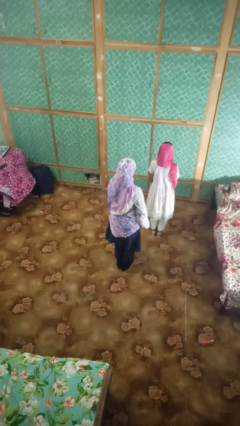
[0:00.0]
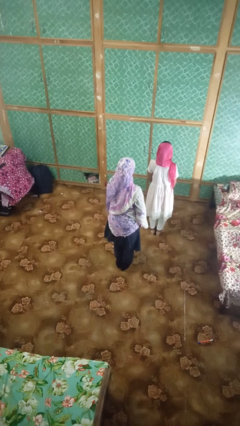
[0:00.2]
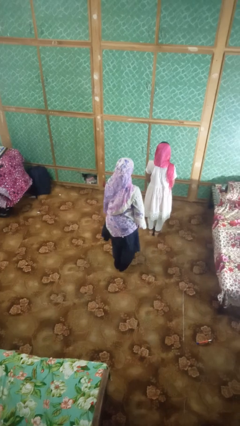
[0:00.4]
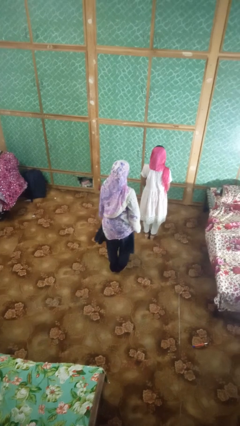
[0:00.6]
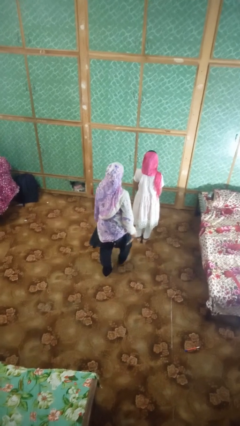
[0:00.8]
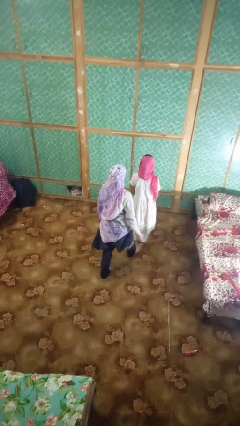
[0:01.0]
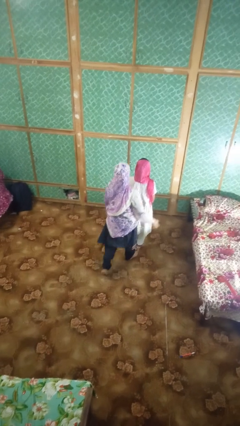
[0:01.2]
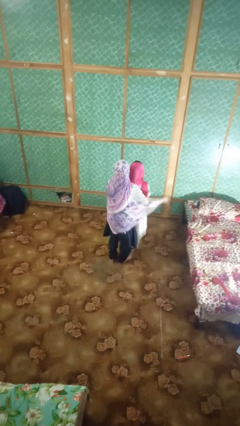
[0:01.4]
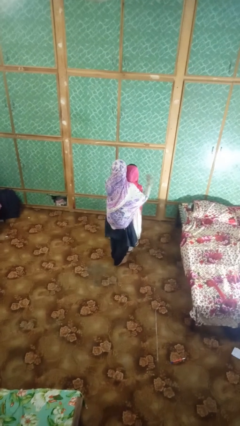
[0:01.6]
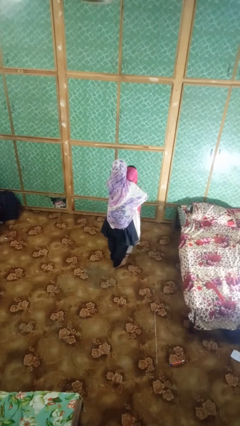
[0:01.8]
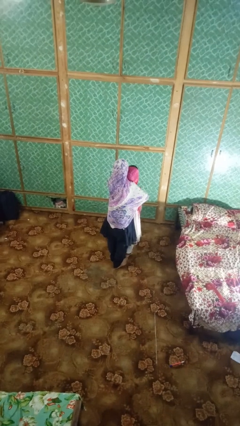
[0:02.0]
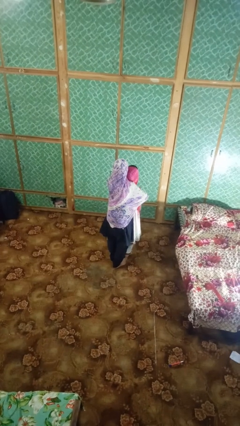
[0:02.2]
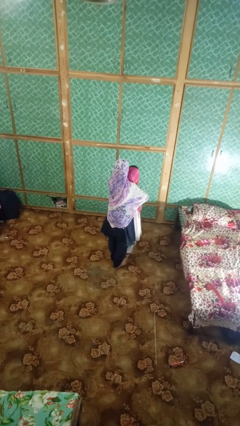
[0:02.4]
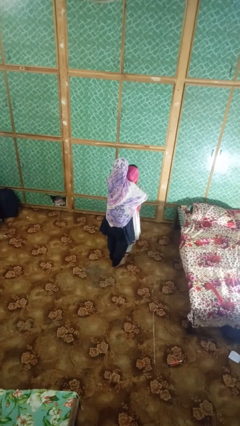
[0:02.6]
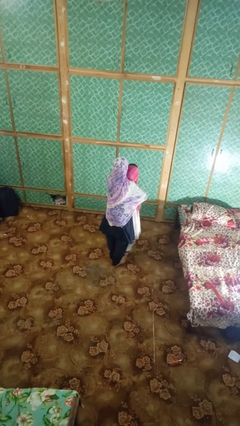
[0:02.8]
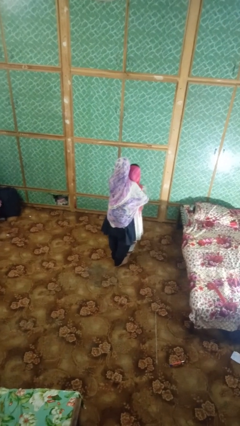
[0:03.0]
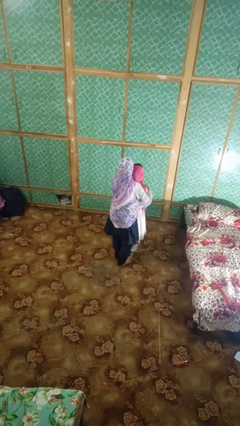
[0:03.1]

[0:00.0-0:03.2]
person hugs person from behind

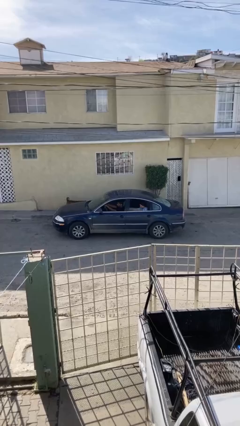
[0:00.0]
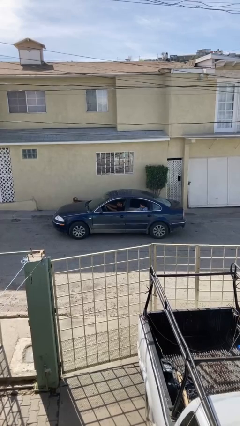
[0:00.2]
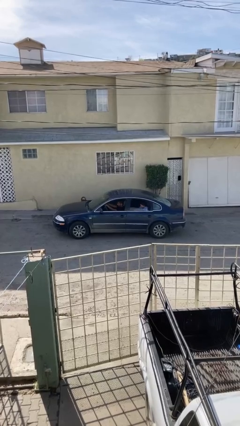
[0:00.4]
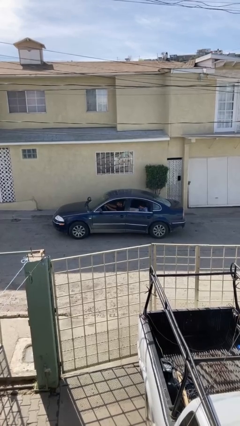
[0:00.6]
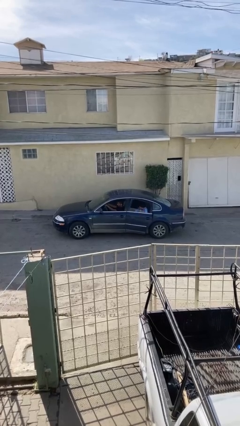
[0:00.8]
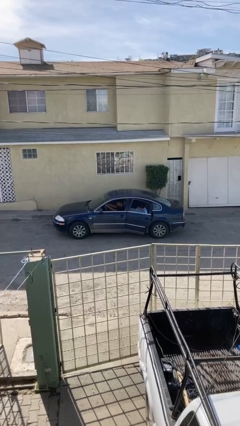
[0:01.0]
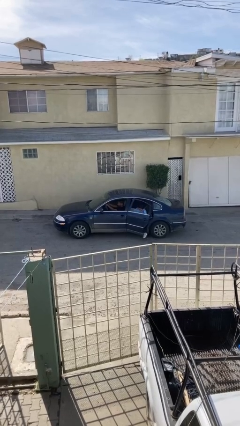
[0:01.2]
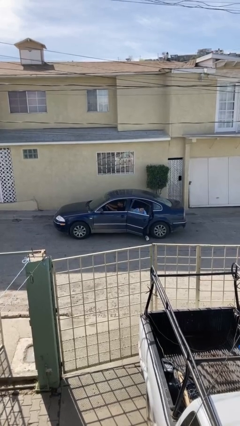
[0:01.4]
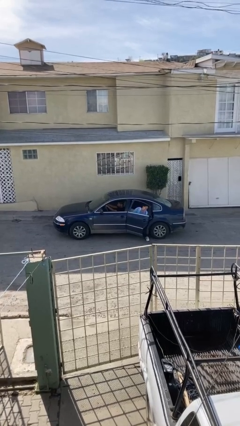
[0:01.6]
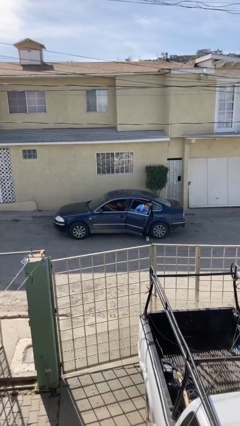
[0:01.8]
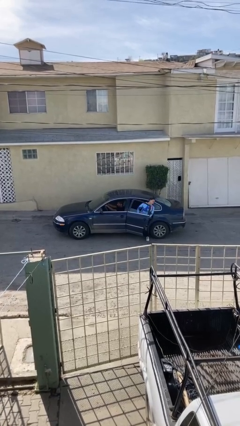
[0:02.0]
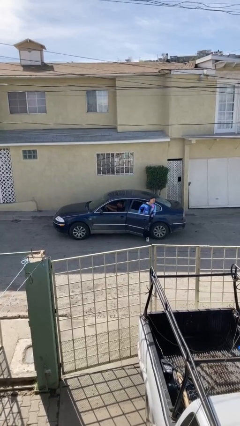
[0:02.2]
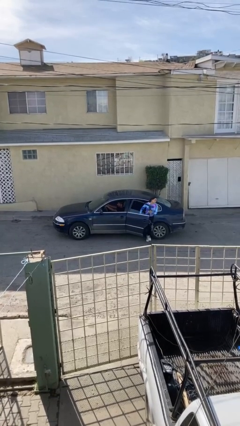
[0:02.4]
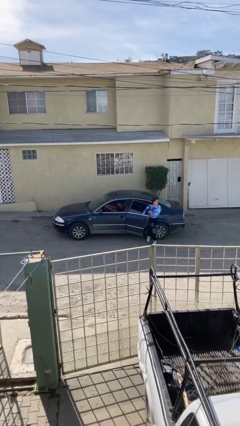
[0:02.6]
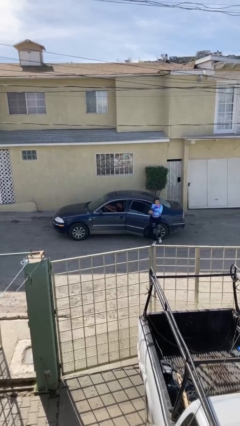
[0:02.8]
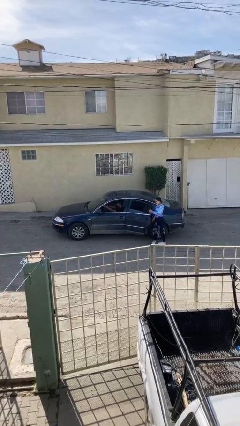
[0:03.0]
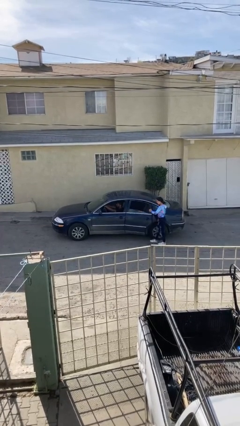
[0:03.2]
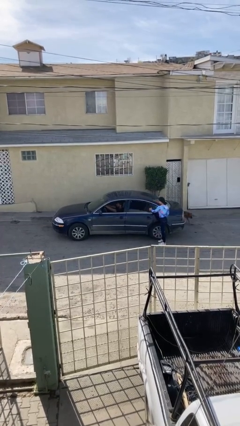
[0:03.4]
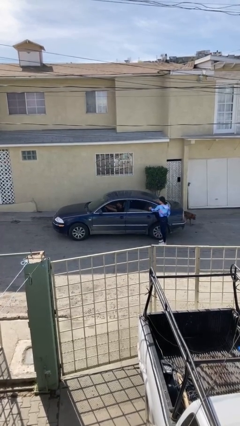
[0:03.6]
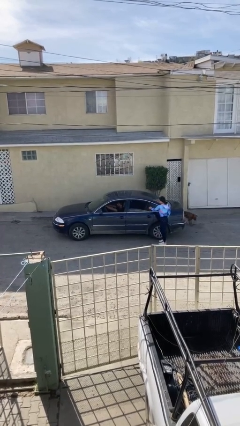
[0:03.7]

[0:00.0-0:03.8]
car drops off person

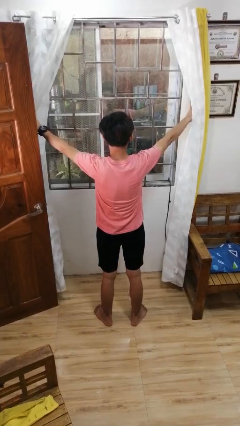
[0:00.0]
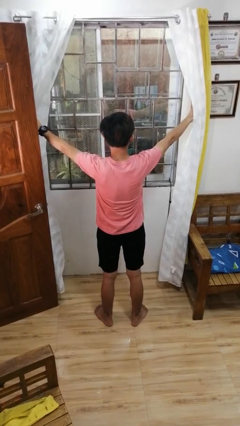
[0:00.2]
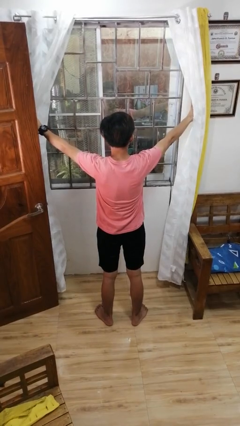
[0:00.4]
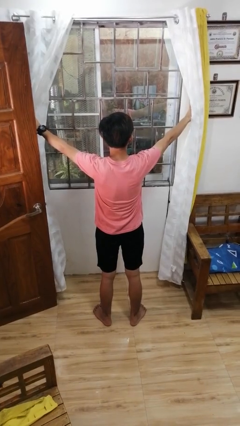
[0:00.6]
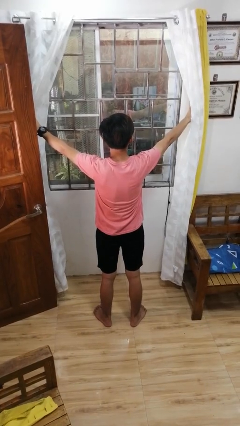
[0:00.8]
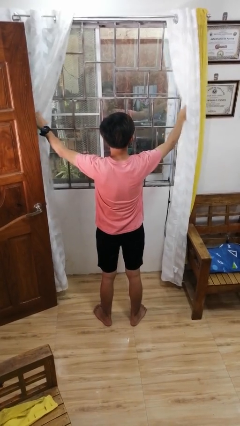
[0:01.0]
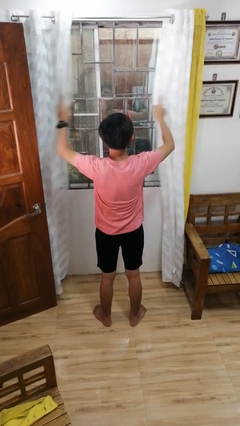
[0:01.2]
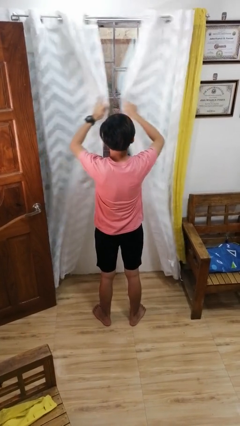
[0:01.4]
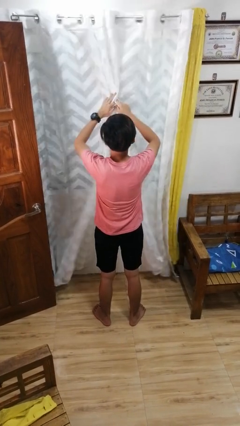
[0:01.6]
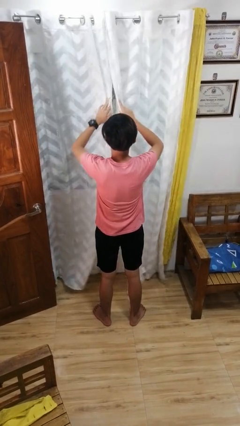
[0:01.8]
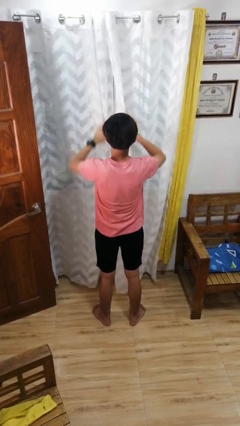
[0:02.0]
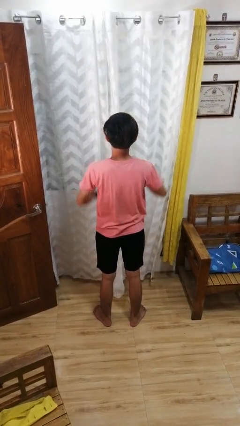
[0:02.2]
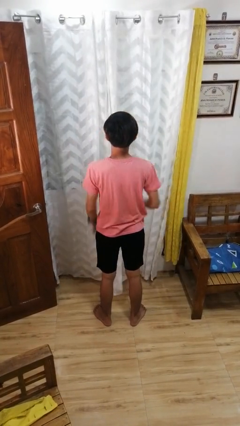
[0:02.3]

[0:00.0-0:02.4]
person closes curtains

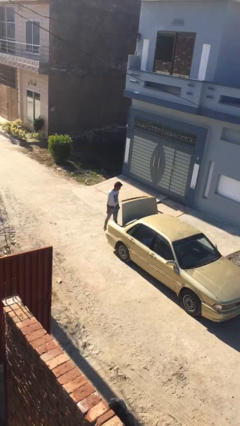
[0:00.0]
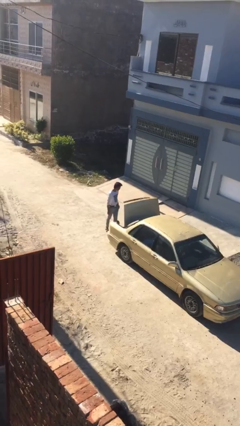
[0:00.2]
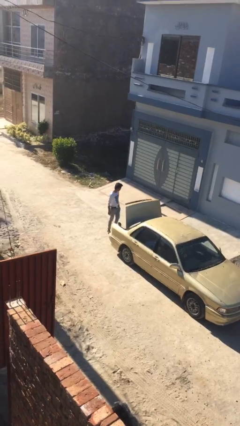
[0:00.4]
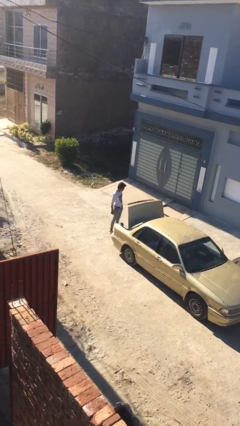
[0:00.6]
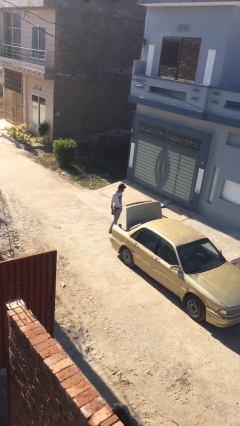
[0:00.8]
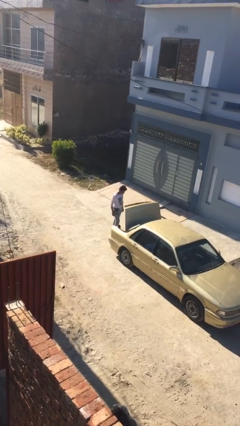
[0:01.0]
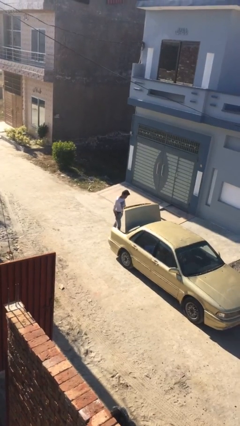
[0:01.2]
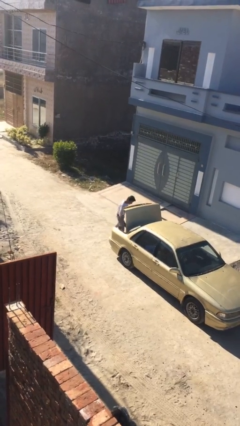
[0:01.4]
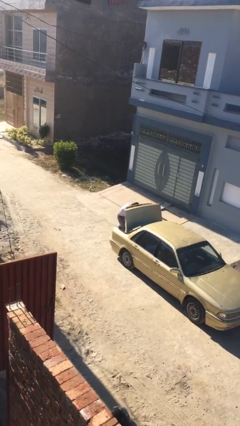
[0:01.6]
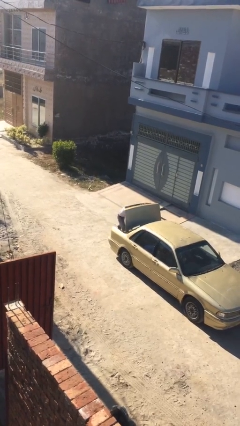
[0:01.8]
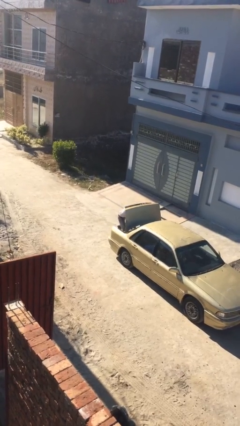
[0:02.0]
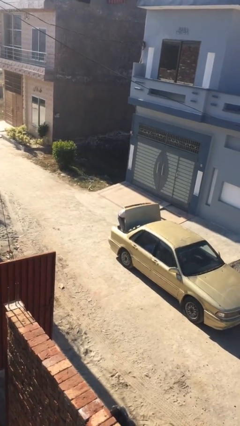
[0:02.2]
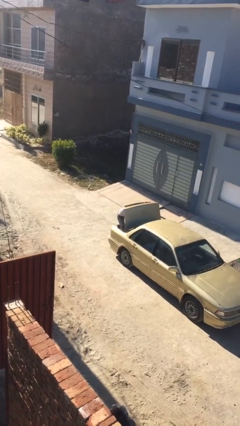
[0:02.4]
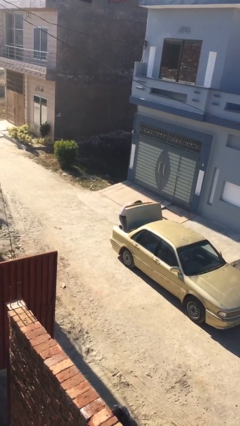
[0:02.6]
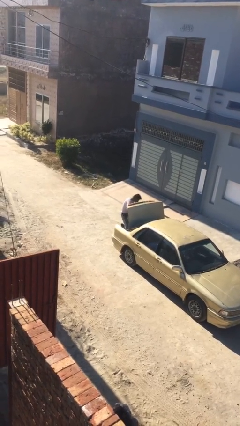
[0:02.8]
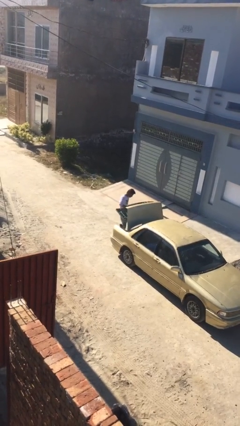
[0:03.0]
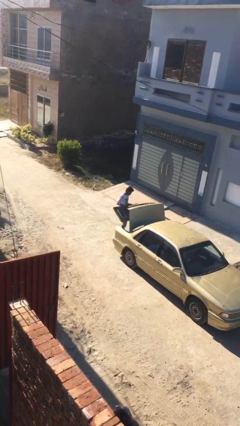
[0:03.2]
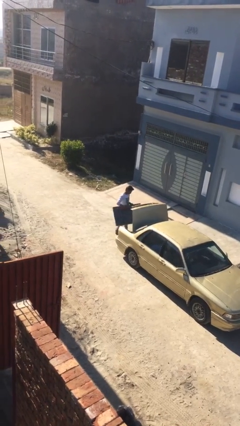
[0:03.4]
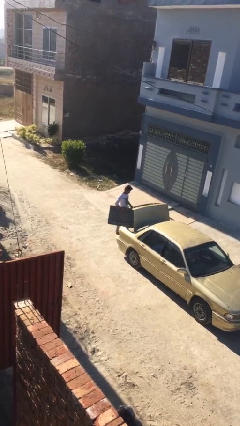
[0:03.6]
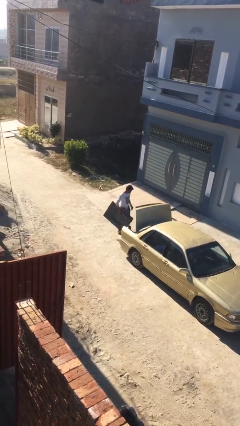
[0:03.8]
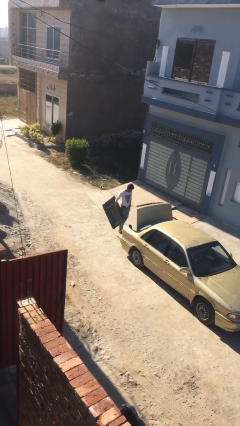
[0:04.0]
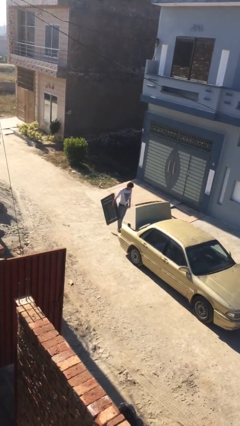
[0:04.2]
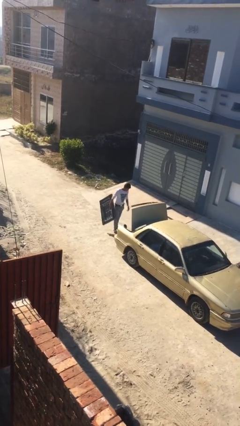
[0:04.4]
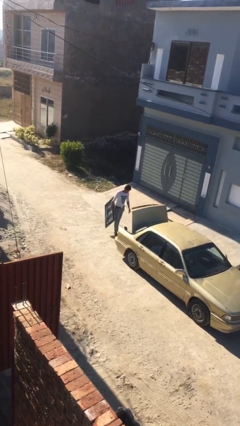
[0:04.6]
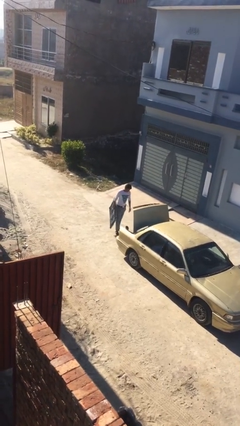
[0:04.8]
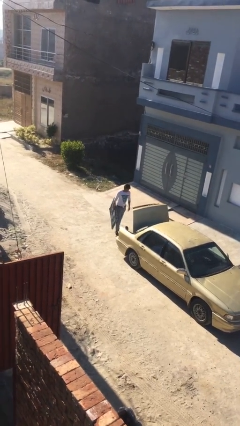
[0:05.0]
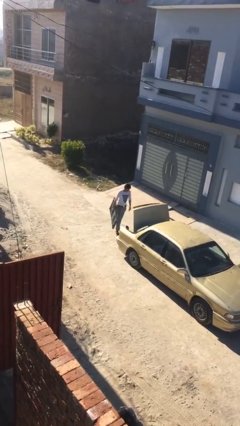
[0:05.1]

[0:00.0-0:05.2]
person unloads car

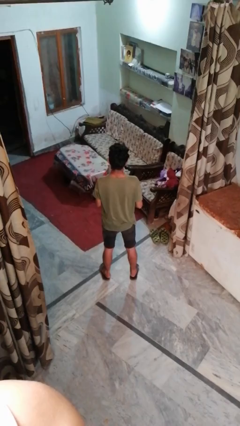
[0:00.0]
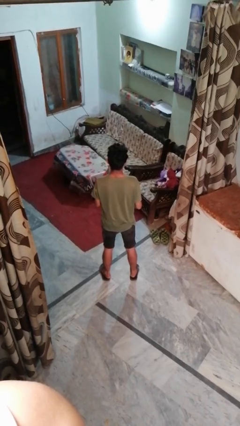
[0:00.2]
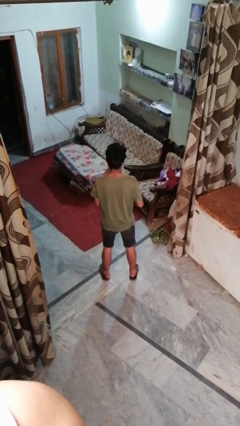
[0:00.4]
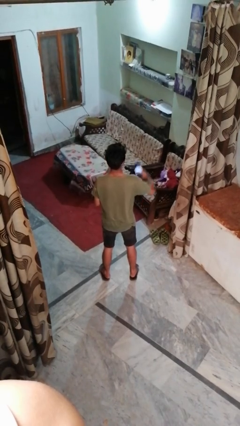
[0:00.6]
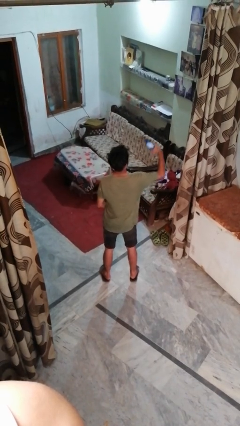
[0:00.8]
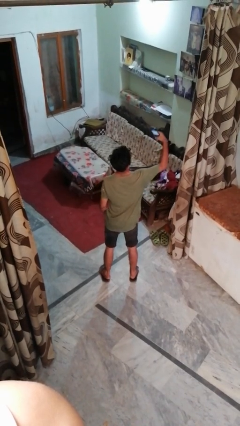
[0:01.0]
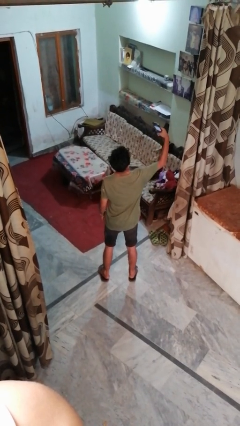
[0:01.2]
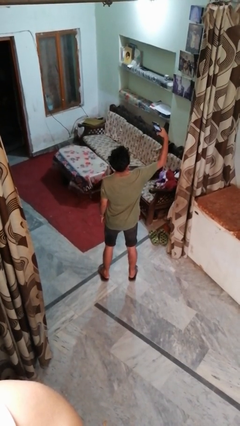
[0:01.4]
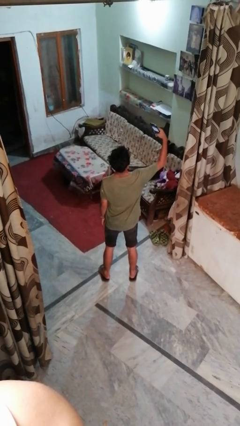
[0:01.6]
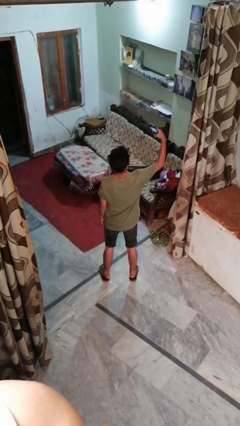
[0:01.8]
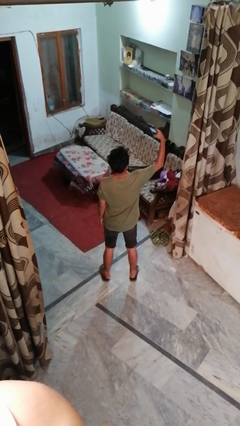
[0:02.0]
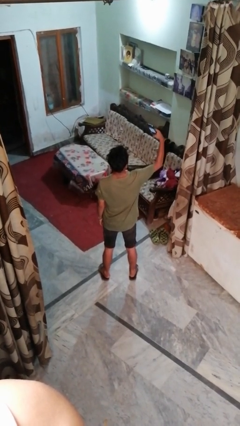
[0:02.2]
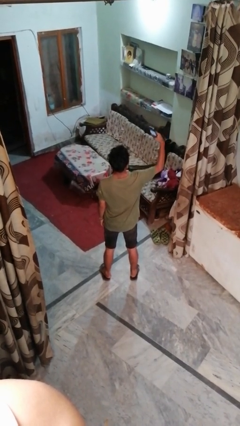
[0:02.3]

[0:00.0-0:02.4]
person takes selfie

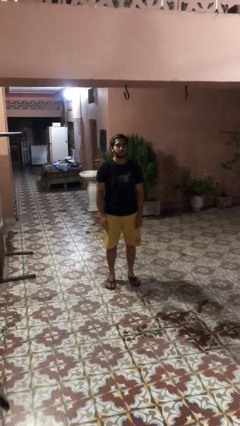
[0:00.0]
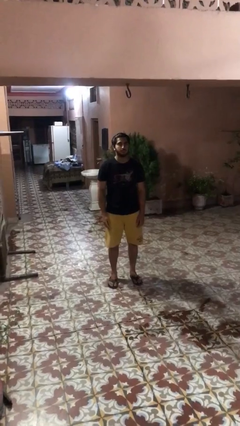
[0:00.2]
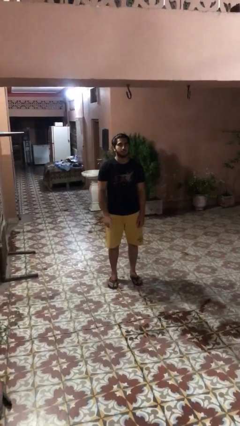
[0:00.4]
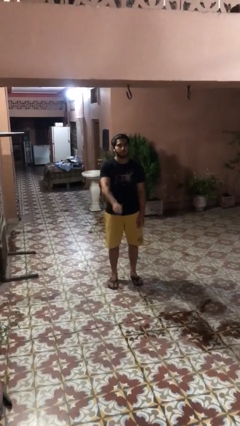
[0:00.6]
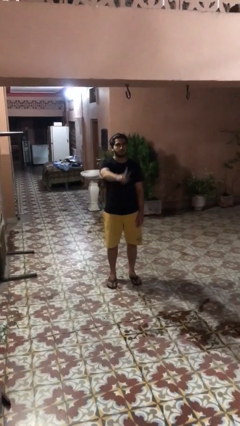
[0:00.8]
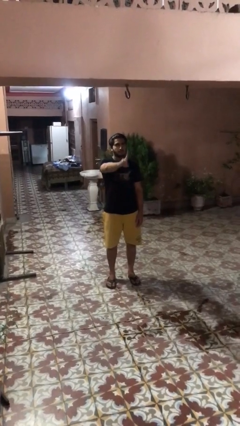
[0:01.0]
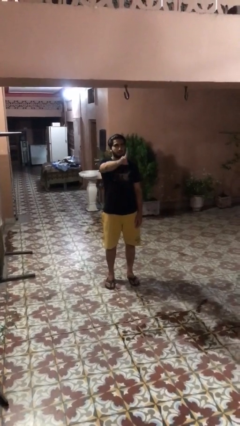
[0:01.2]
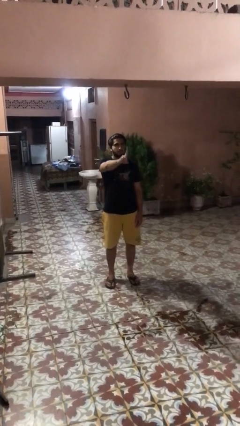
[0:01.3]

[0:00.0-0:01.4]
person gestures number one
